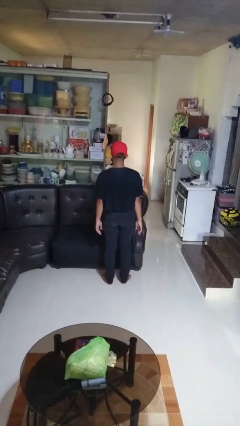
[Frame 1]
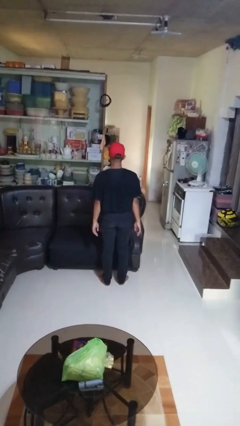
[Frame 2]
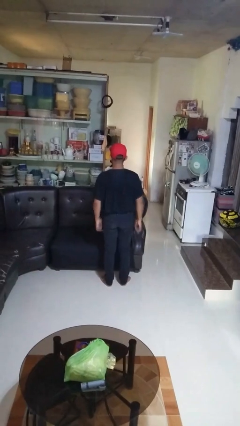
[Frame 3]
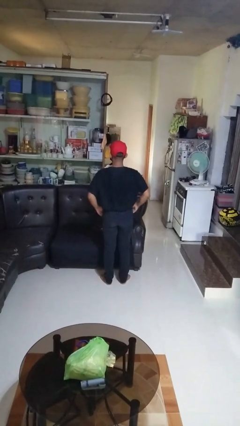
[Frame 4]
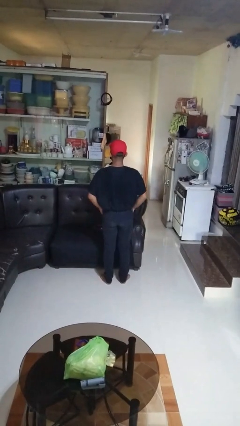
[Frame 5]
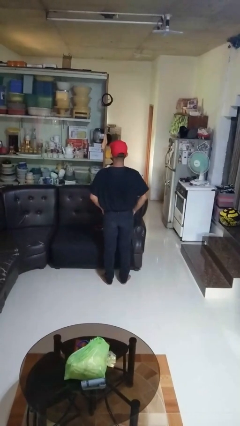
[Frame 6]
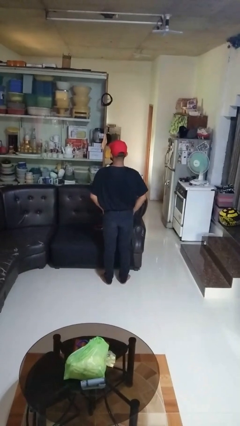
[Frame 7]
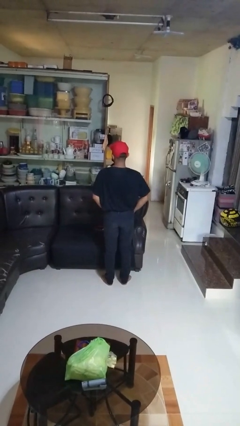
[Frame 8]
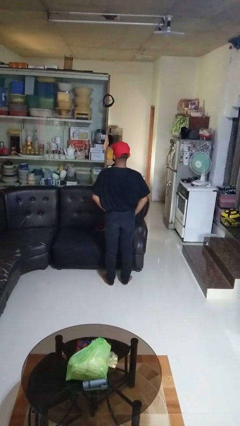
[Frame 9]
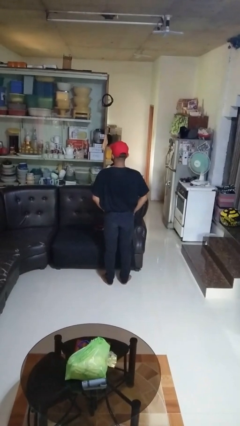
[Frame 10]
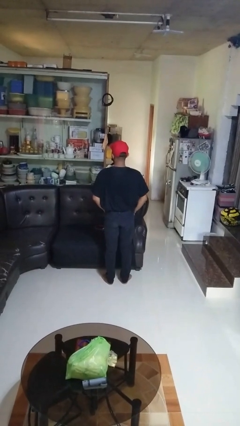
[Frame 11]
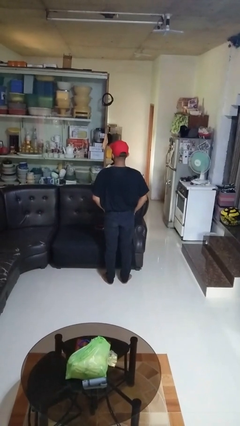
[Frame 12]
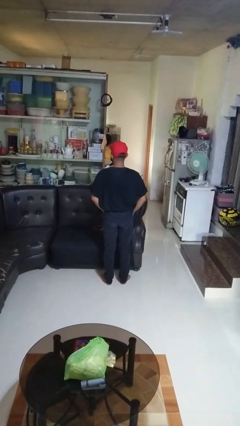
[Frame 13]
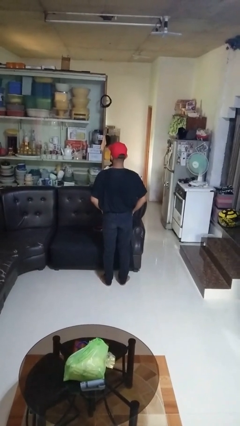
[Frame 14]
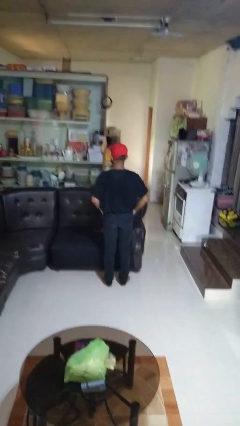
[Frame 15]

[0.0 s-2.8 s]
person puts hands in back pockets

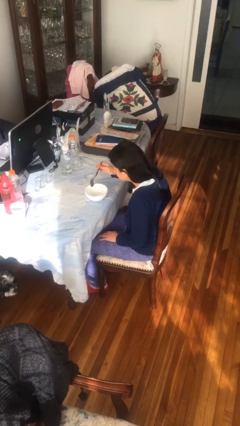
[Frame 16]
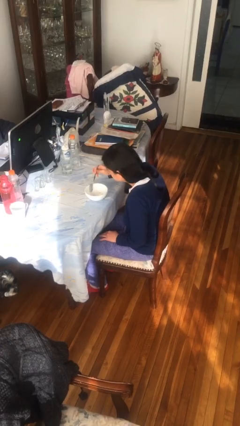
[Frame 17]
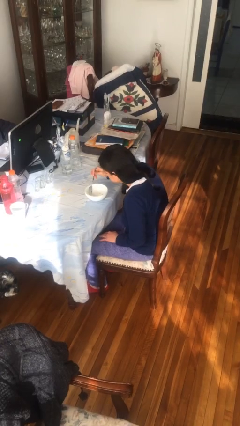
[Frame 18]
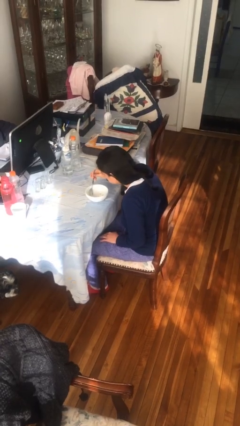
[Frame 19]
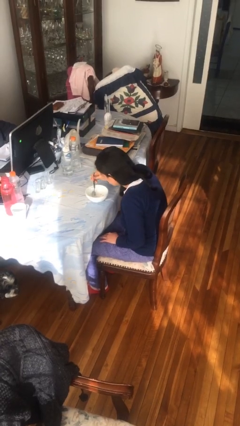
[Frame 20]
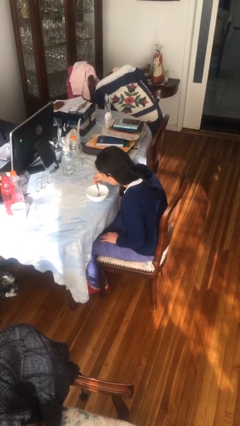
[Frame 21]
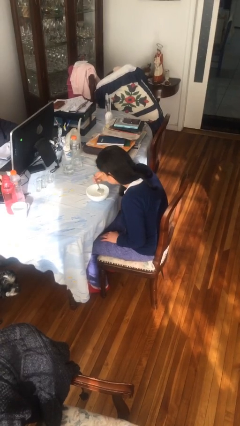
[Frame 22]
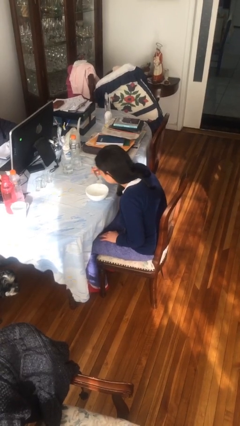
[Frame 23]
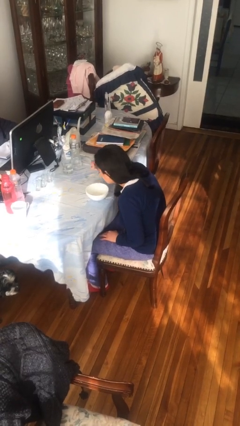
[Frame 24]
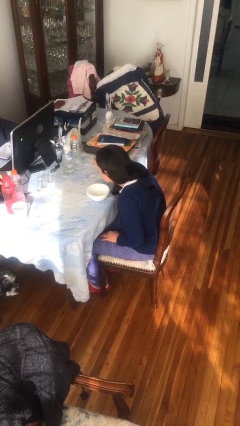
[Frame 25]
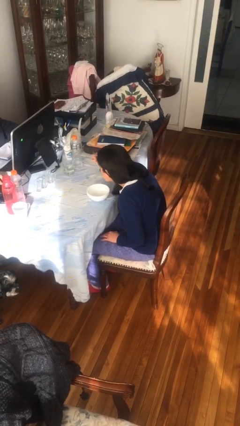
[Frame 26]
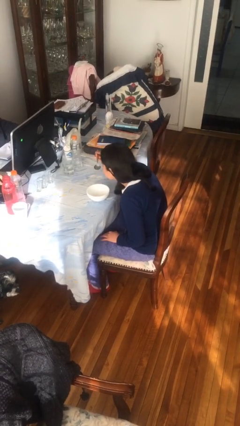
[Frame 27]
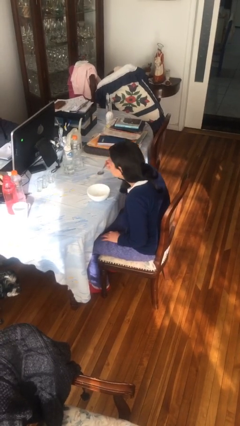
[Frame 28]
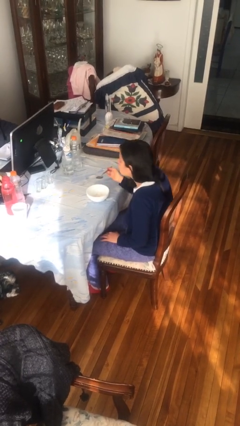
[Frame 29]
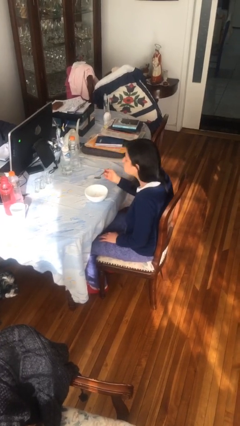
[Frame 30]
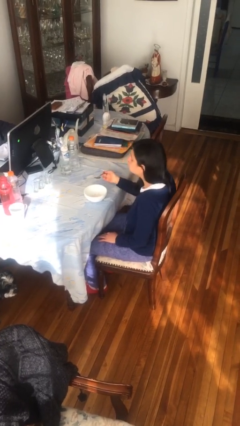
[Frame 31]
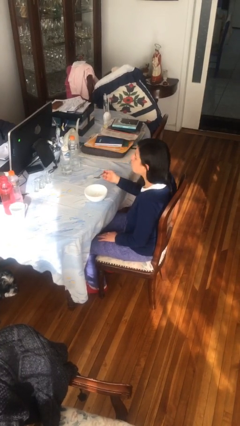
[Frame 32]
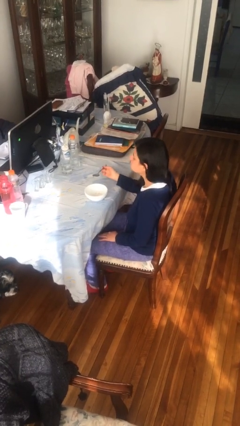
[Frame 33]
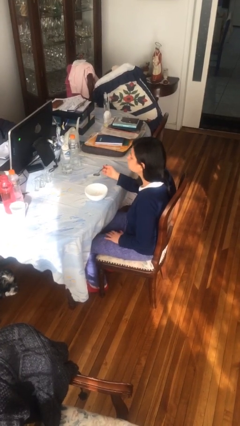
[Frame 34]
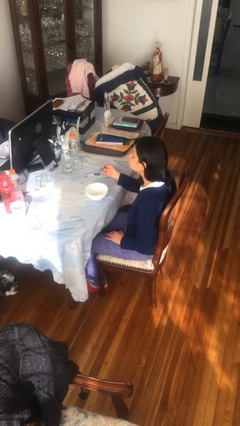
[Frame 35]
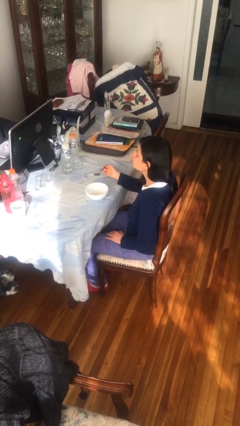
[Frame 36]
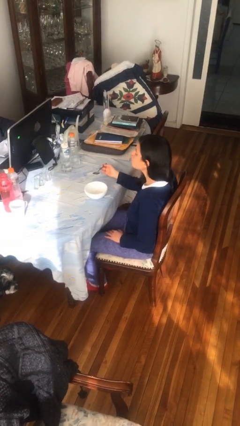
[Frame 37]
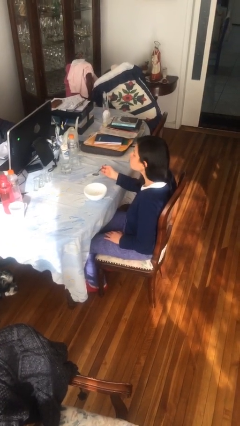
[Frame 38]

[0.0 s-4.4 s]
person eats with utensil

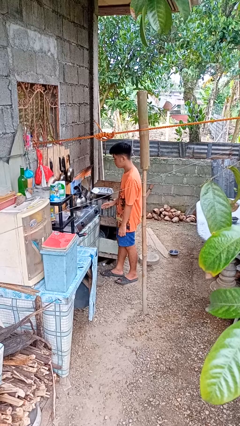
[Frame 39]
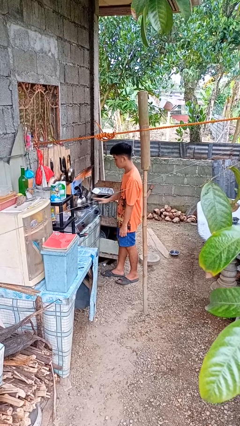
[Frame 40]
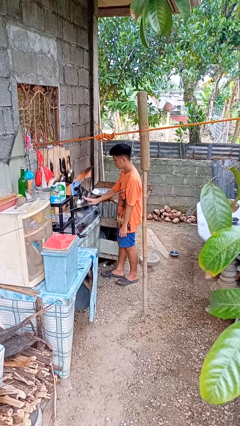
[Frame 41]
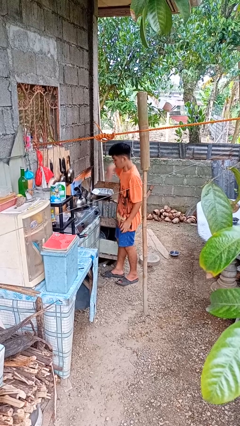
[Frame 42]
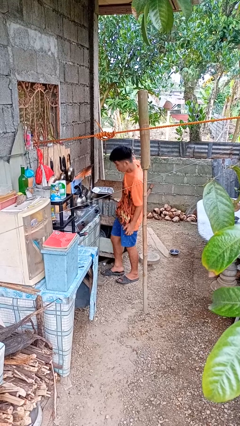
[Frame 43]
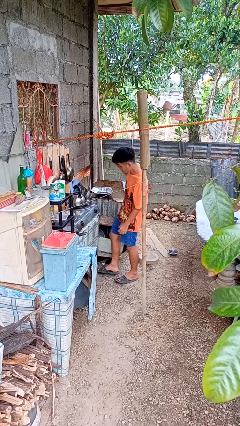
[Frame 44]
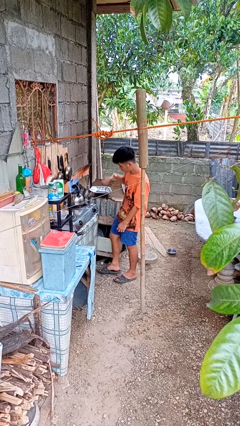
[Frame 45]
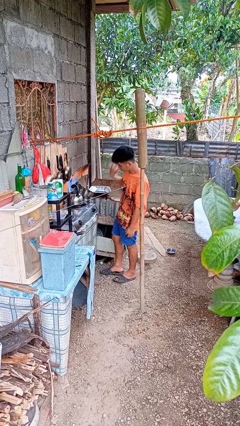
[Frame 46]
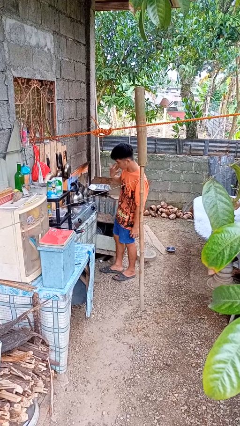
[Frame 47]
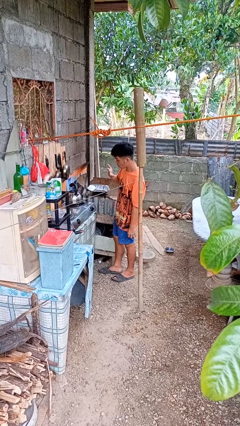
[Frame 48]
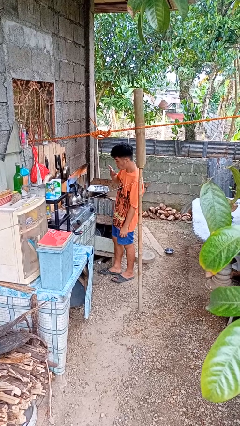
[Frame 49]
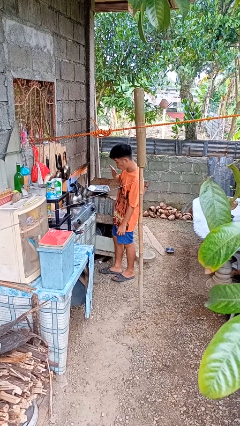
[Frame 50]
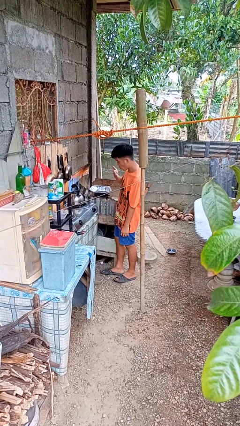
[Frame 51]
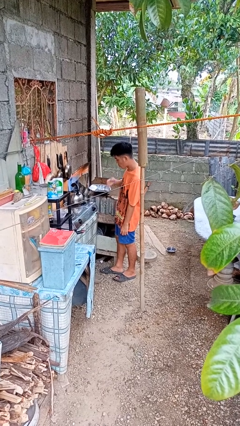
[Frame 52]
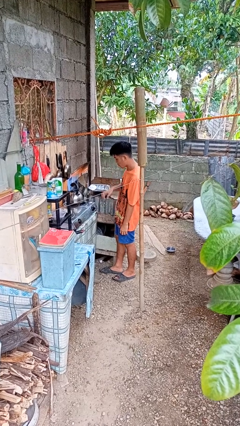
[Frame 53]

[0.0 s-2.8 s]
person burns hand

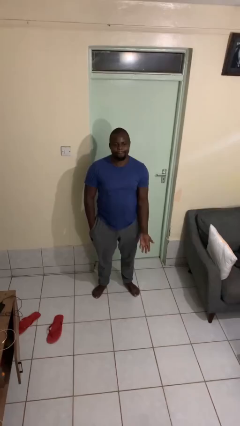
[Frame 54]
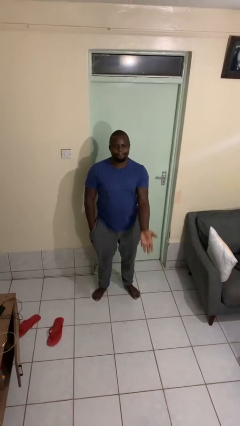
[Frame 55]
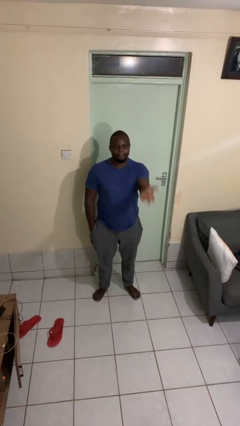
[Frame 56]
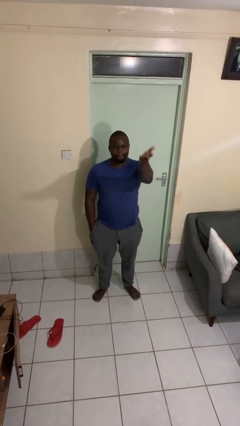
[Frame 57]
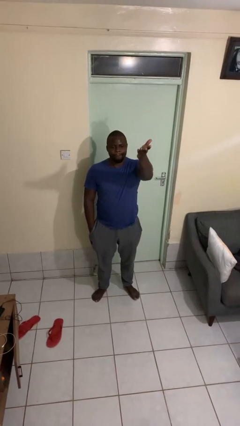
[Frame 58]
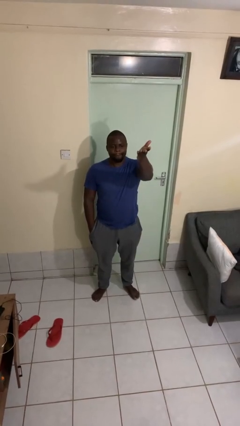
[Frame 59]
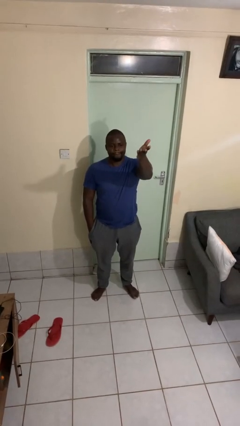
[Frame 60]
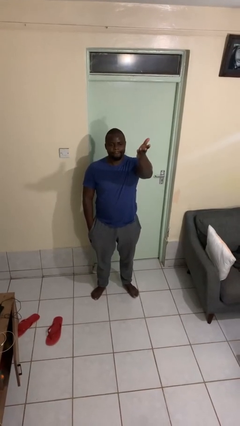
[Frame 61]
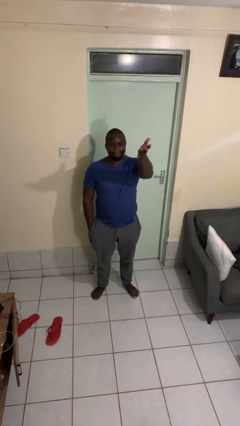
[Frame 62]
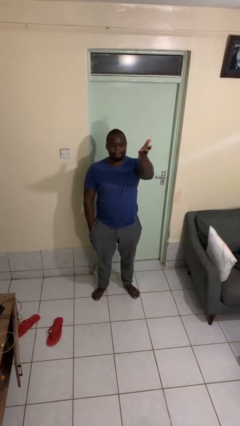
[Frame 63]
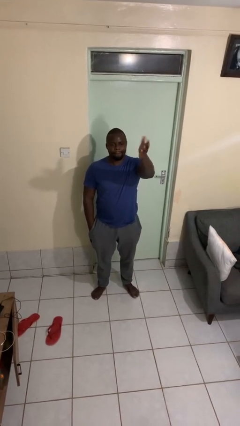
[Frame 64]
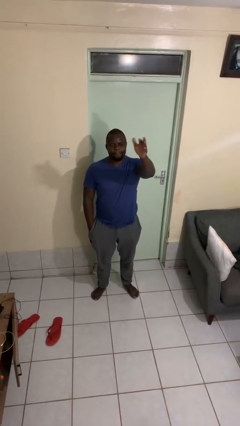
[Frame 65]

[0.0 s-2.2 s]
person gestures swipe up

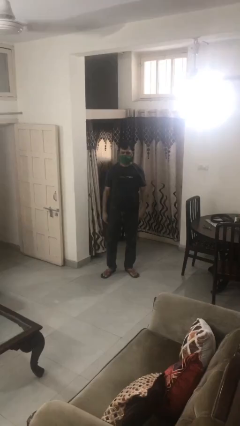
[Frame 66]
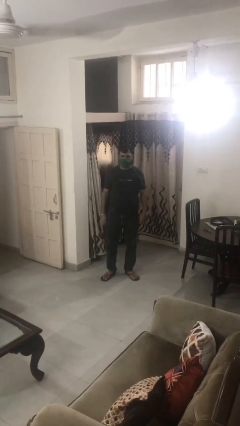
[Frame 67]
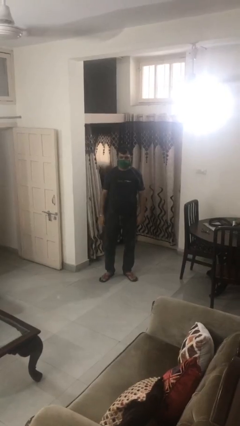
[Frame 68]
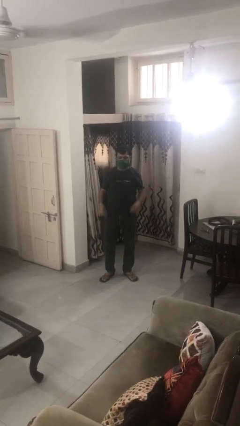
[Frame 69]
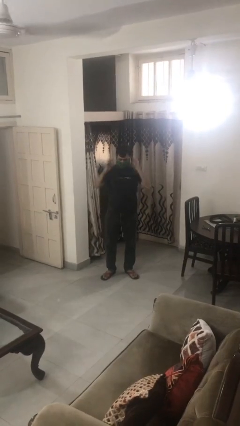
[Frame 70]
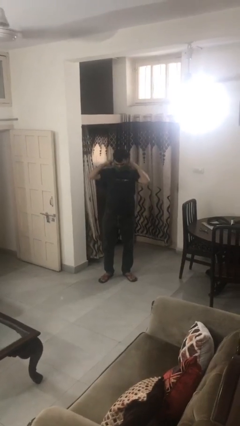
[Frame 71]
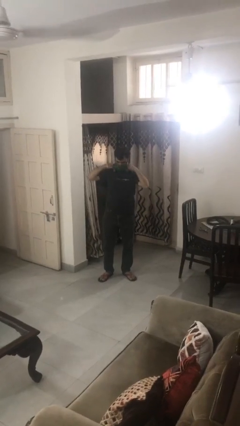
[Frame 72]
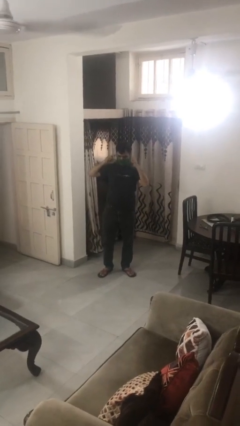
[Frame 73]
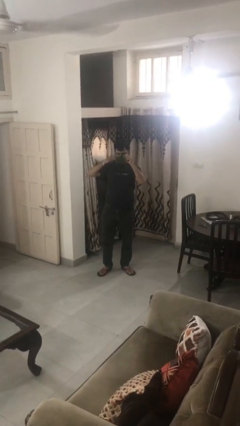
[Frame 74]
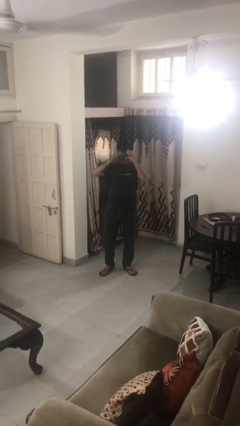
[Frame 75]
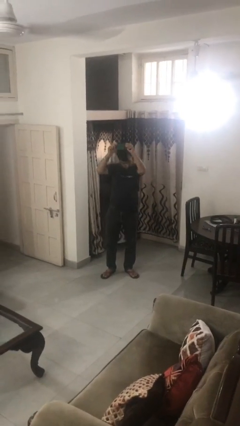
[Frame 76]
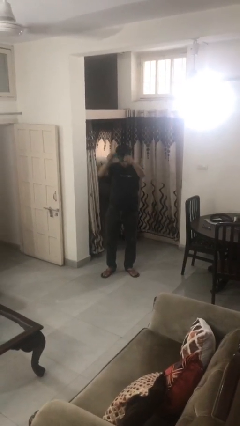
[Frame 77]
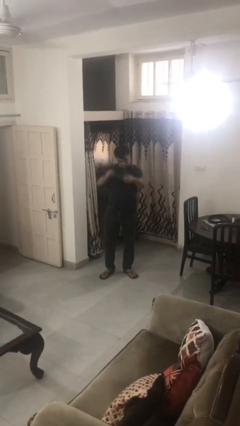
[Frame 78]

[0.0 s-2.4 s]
person takes off facemask

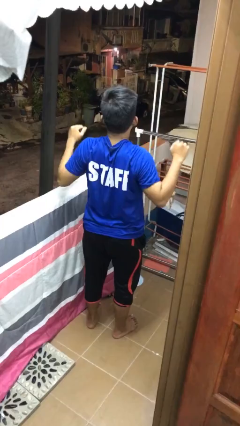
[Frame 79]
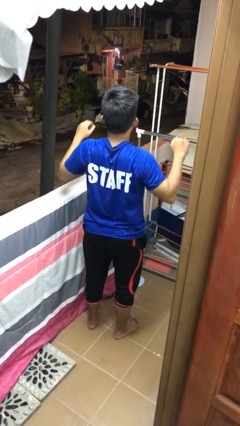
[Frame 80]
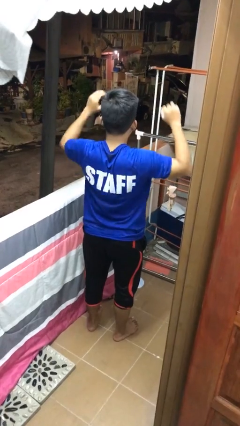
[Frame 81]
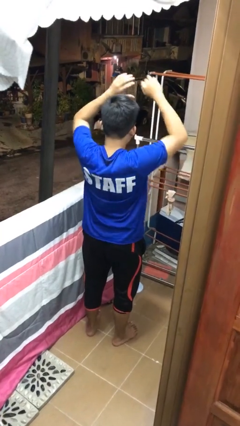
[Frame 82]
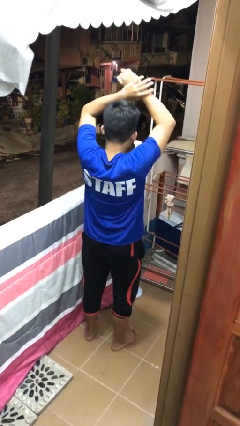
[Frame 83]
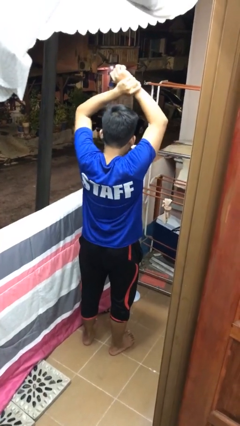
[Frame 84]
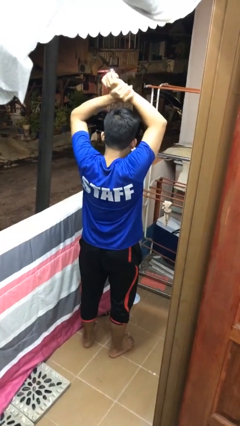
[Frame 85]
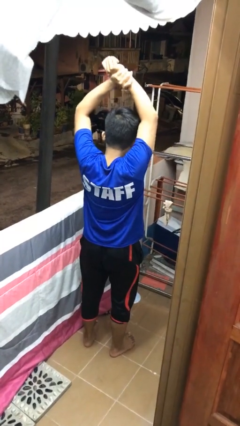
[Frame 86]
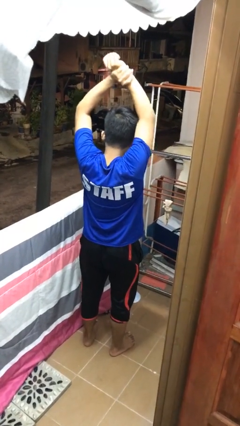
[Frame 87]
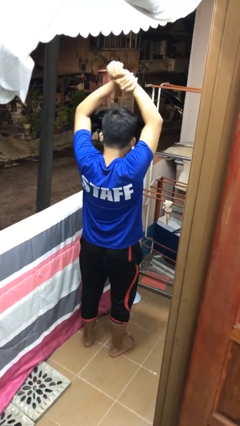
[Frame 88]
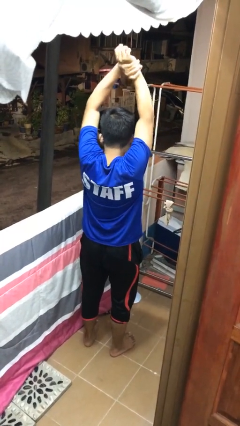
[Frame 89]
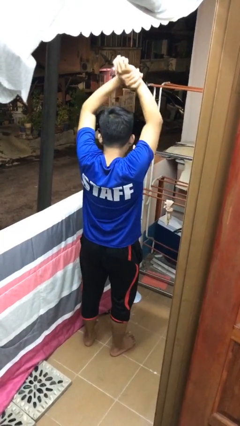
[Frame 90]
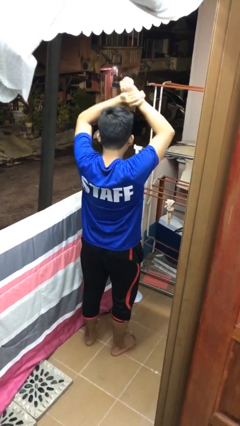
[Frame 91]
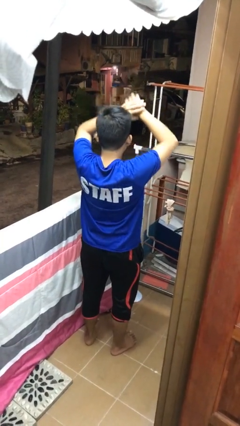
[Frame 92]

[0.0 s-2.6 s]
person stretches arms over head

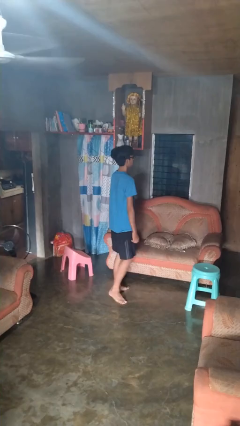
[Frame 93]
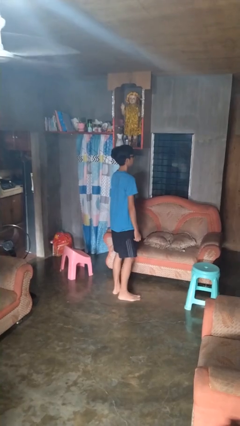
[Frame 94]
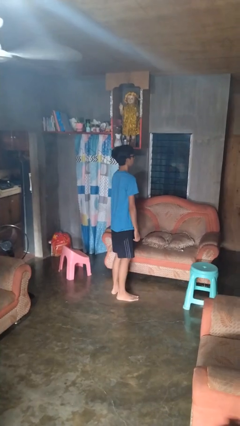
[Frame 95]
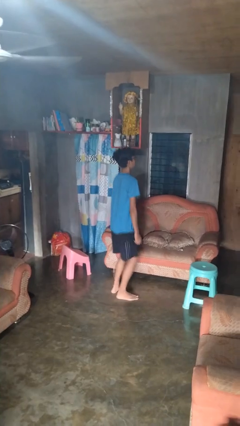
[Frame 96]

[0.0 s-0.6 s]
person jumps
